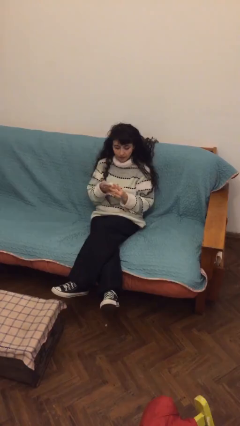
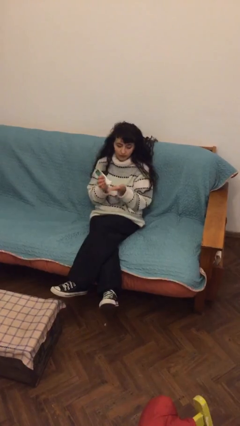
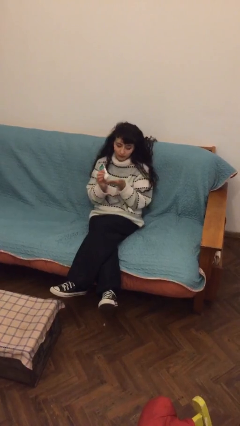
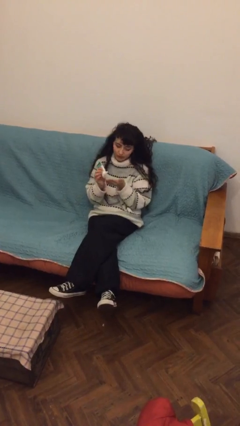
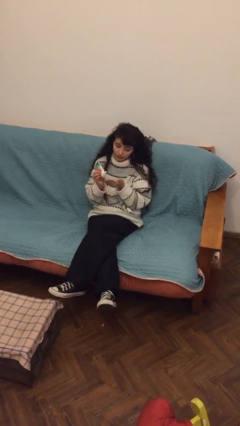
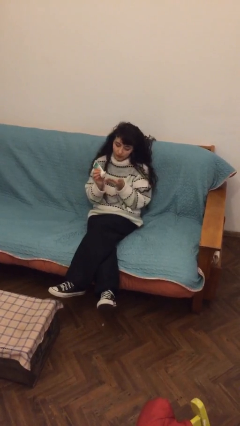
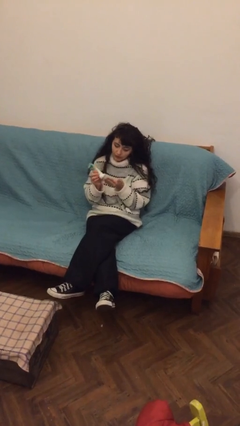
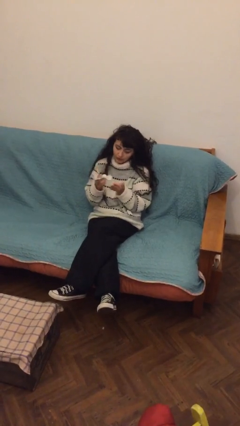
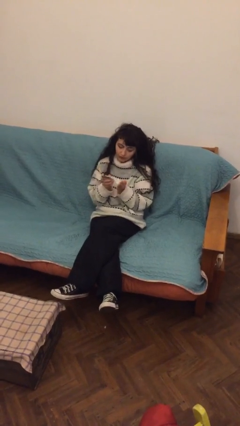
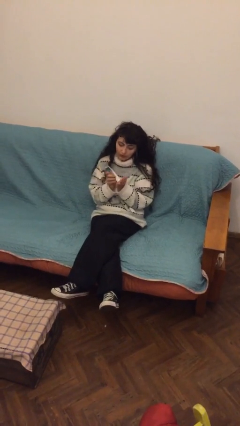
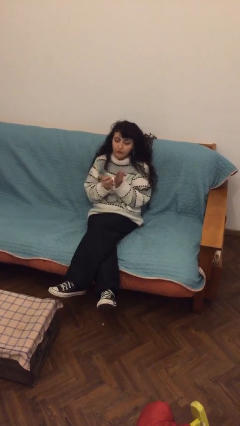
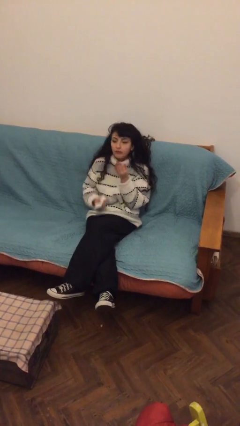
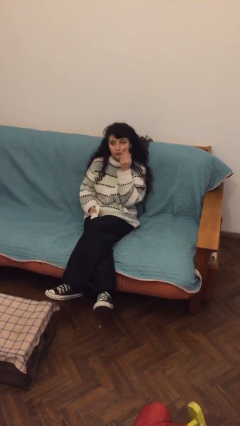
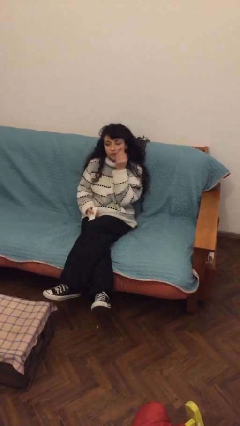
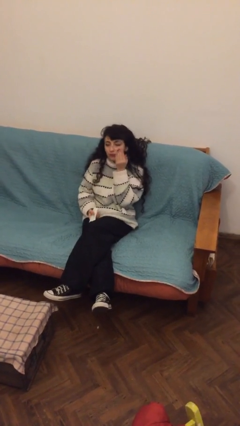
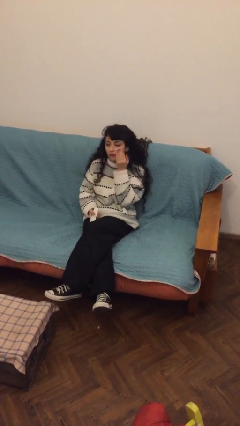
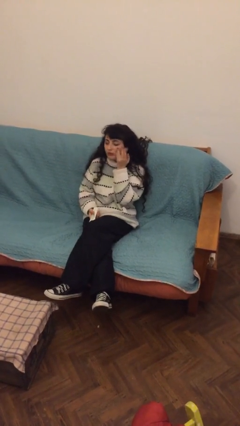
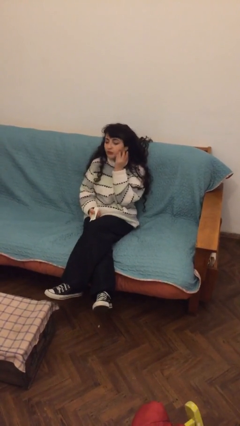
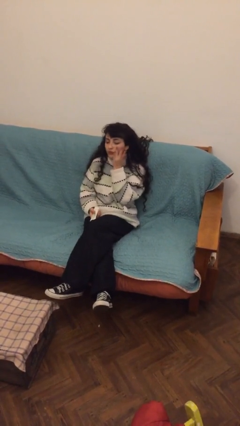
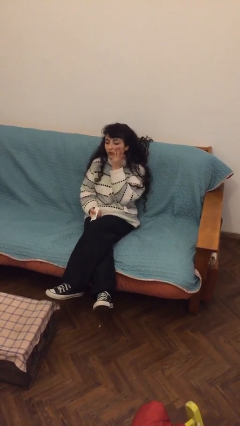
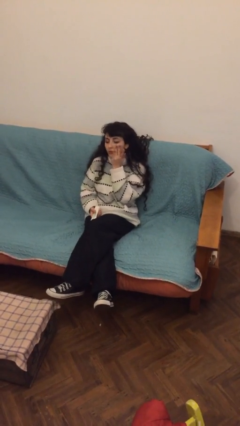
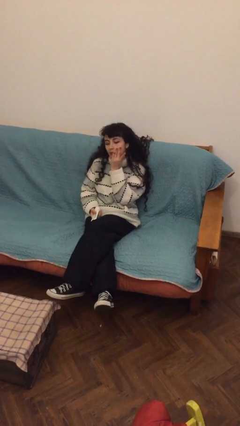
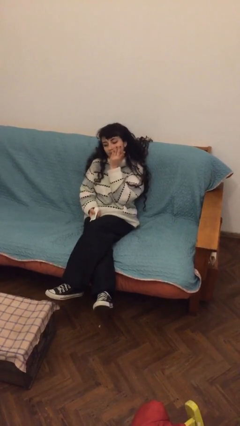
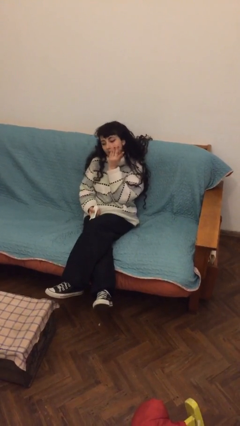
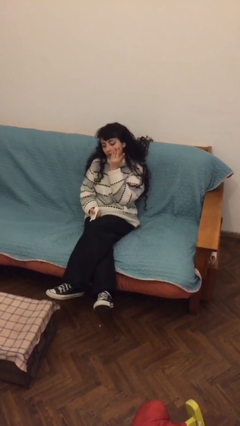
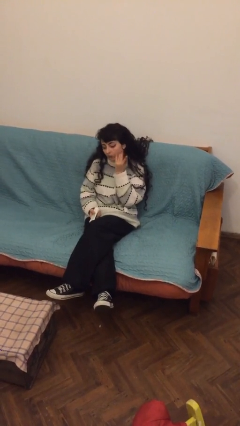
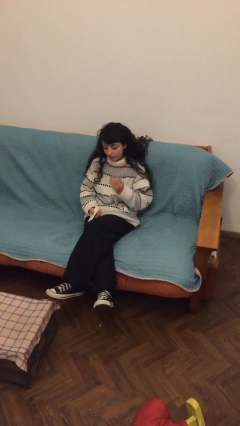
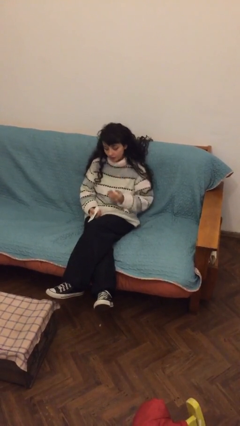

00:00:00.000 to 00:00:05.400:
person applies facial moisturizer

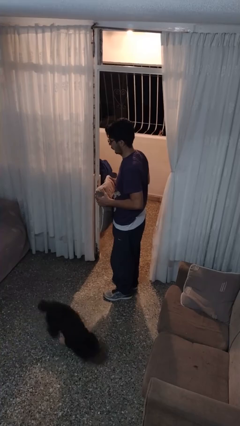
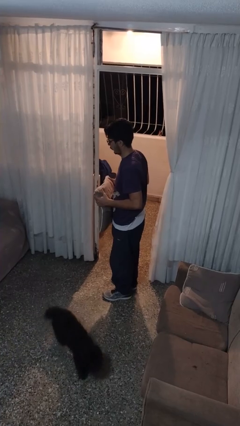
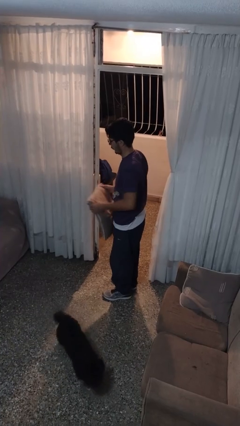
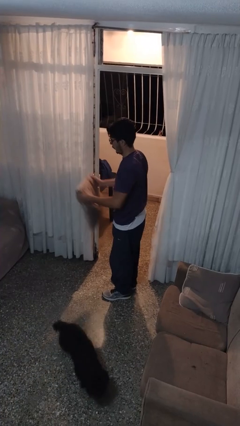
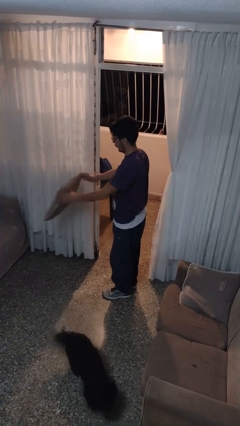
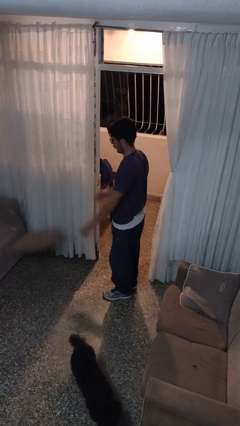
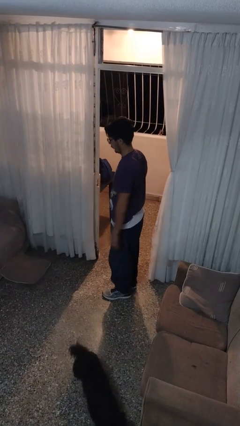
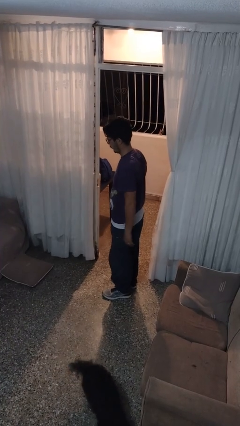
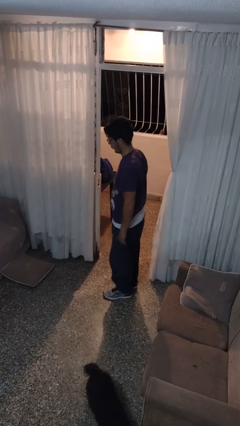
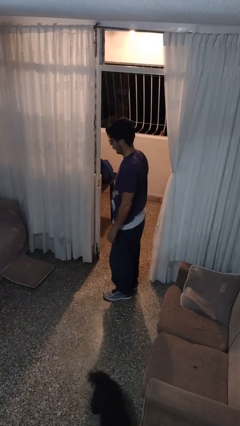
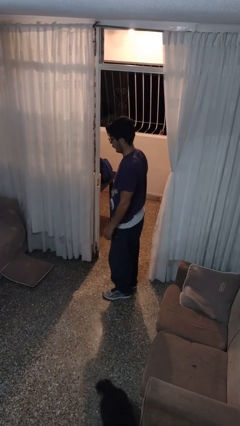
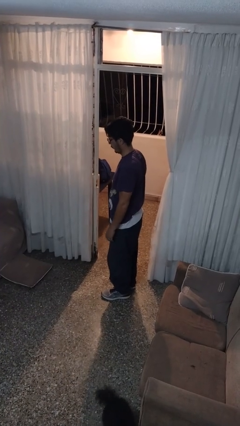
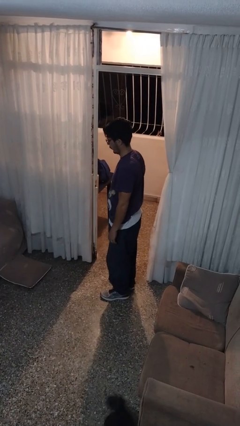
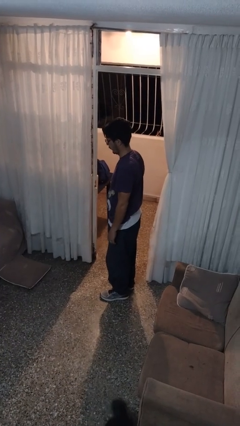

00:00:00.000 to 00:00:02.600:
person throws object to ground

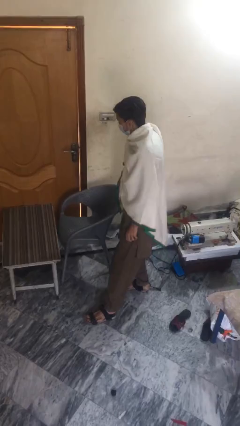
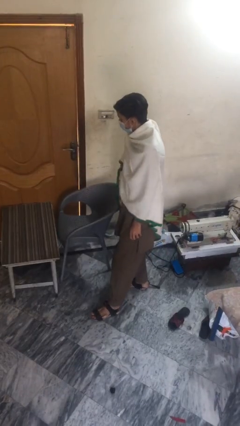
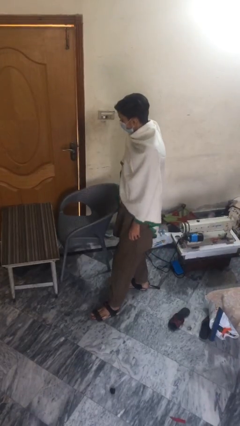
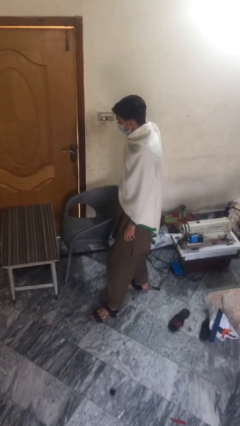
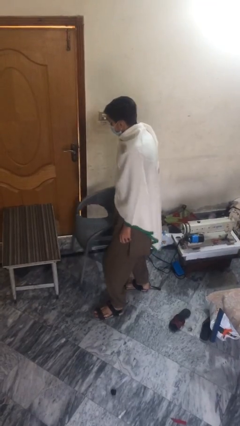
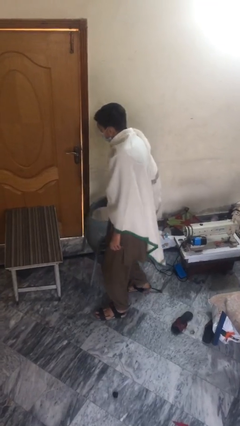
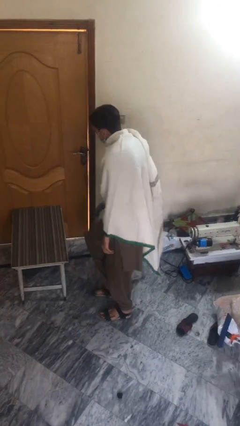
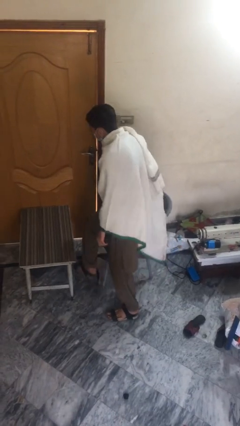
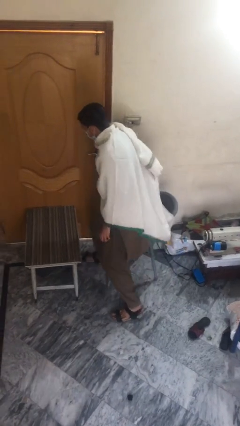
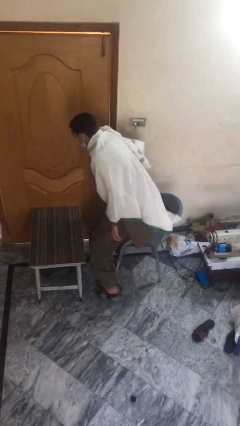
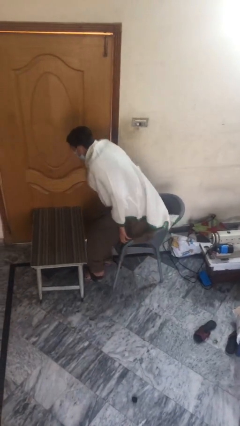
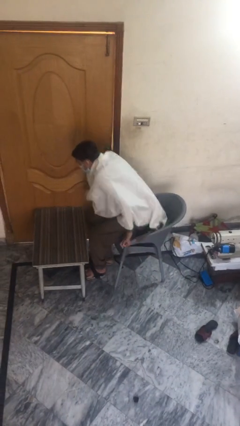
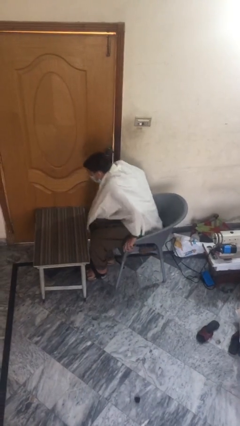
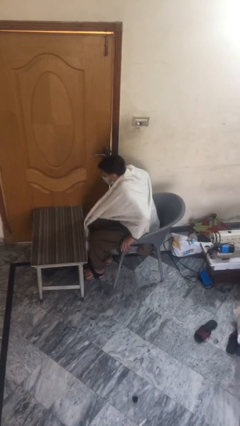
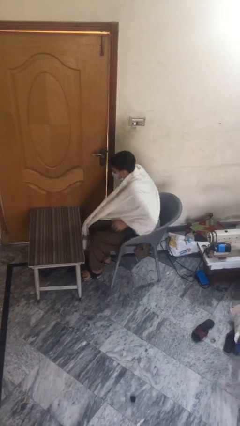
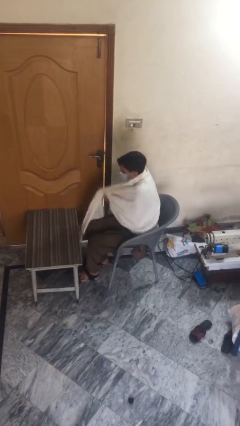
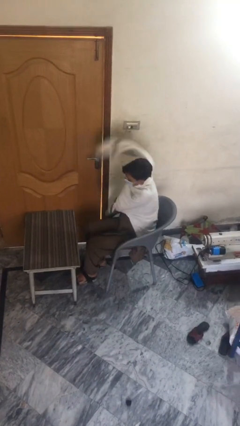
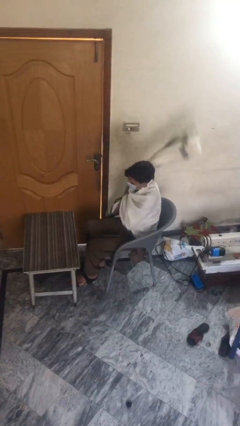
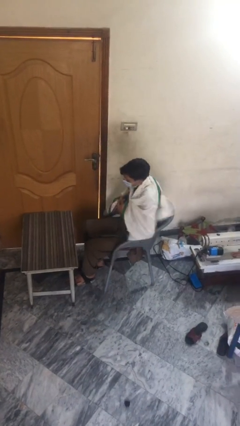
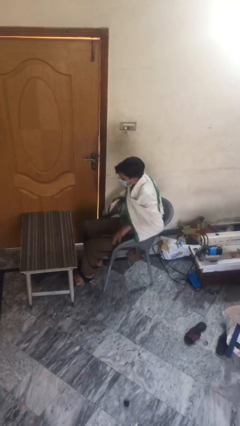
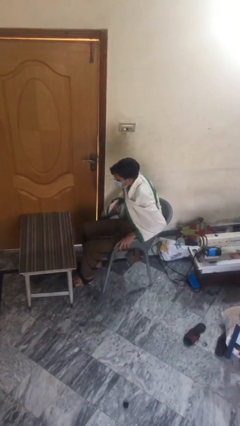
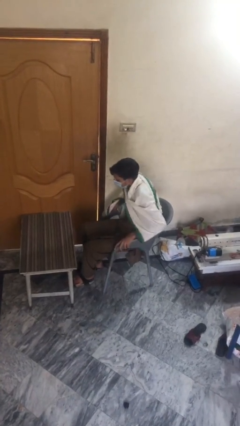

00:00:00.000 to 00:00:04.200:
person sits down

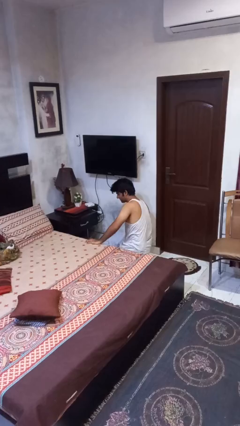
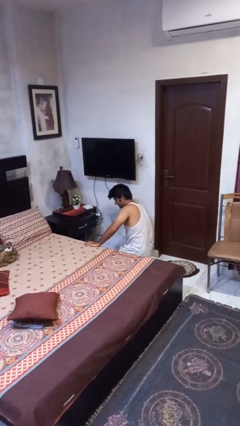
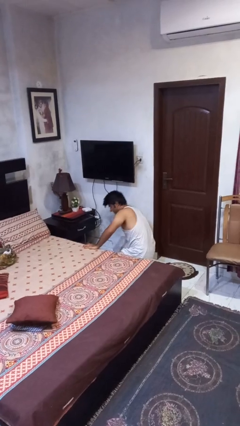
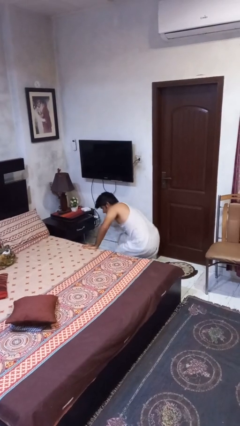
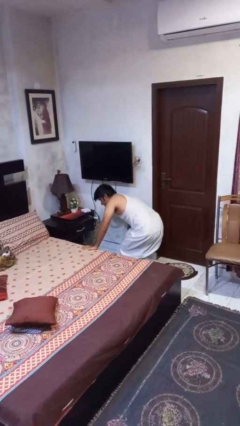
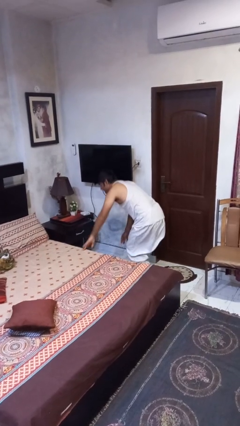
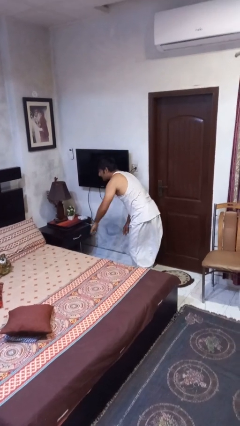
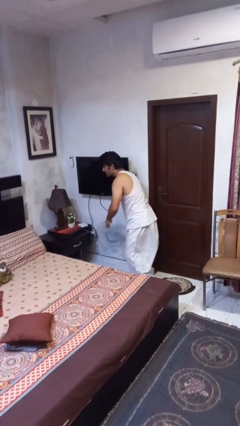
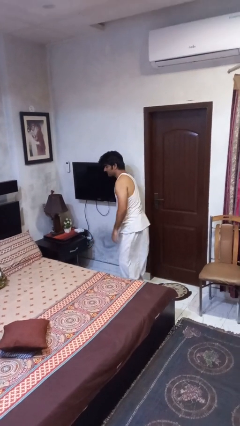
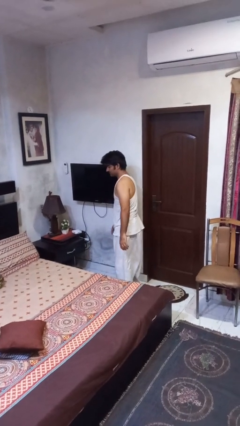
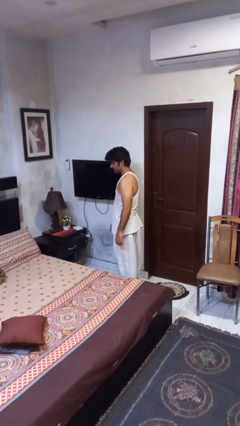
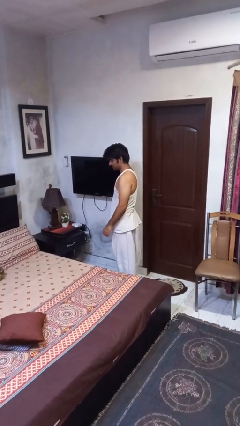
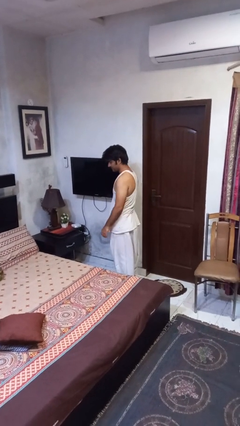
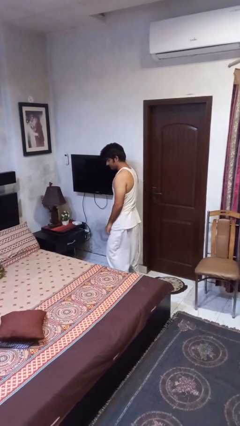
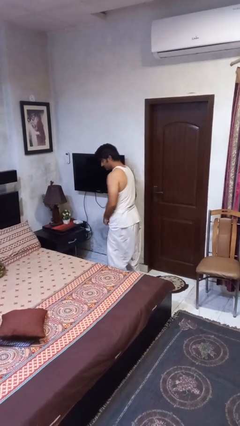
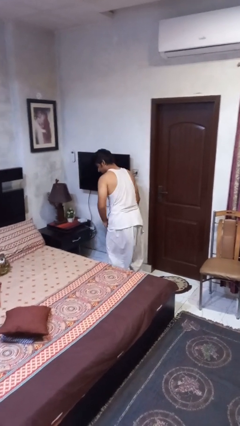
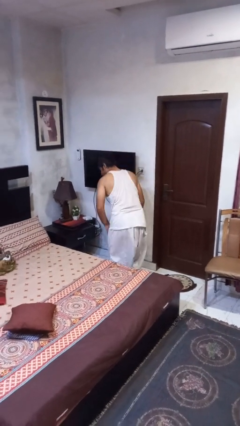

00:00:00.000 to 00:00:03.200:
person stands up from floor

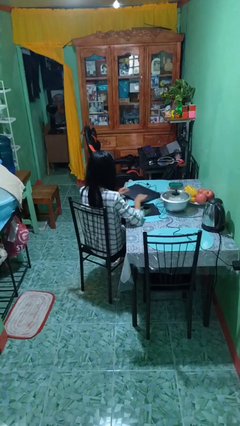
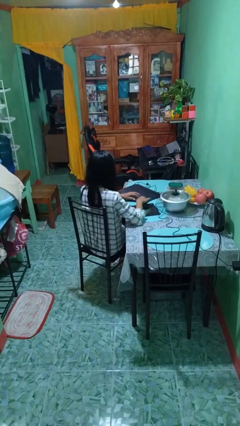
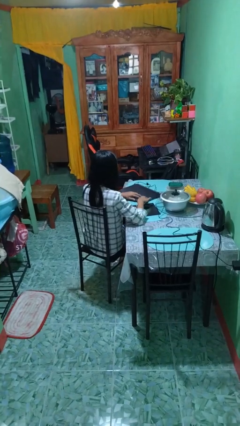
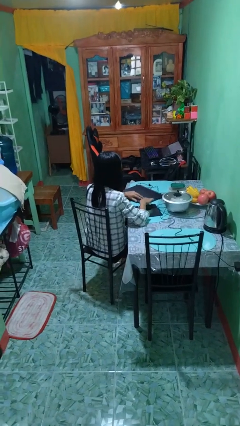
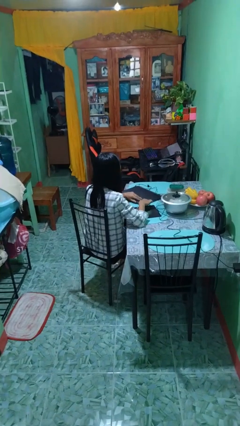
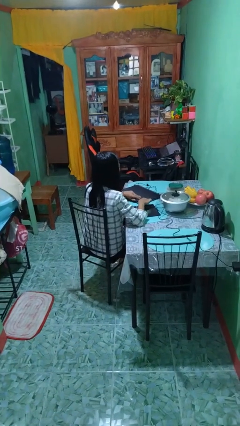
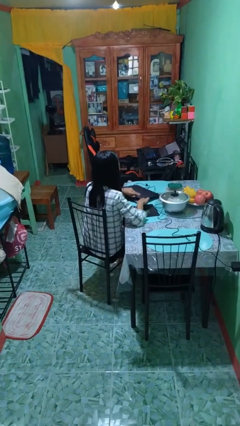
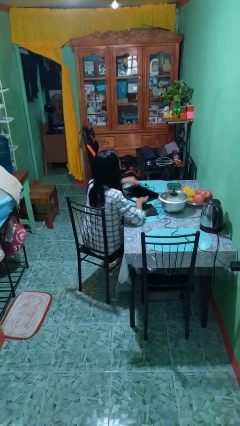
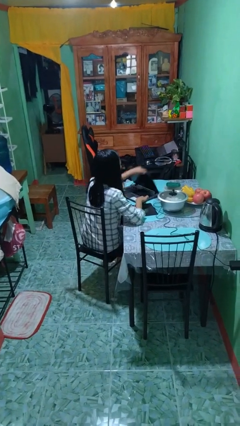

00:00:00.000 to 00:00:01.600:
person opens laptop

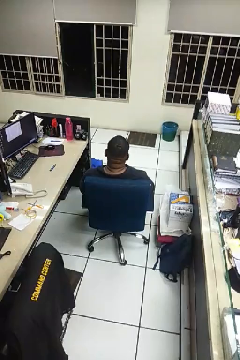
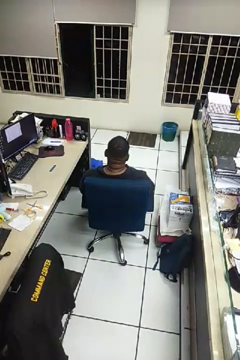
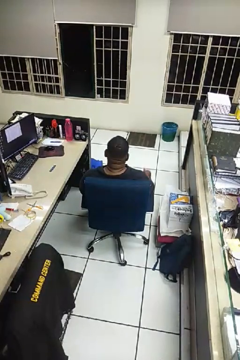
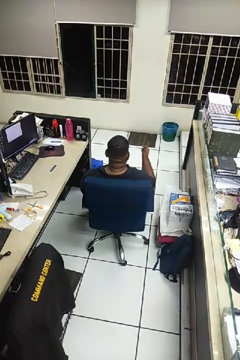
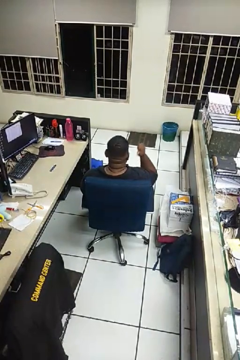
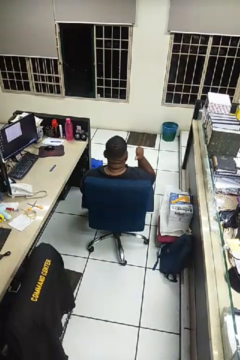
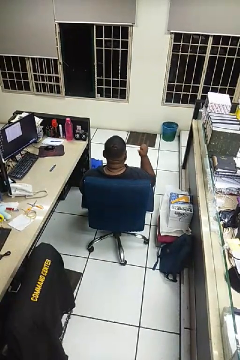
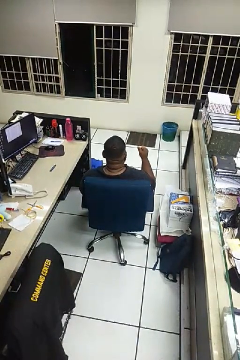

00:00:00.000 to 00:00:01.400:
person gestures behind me
